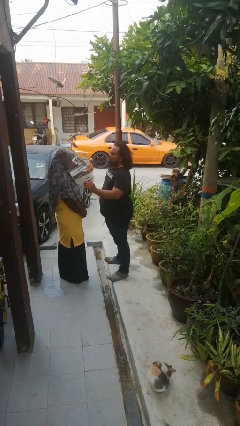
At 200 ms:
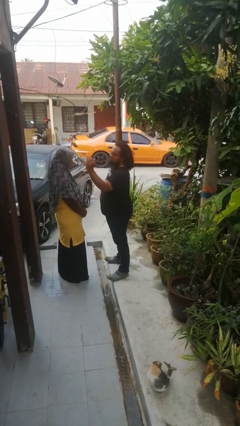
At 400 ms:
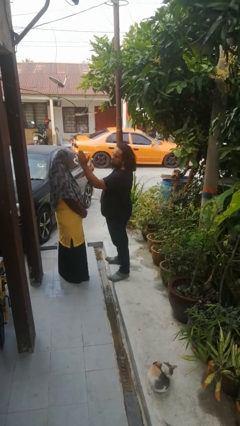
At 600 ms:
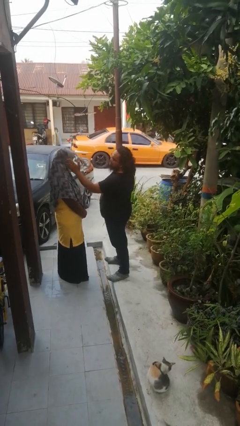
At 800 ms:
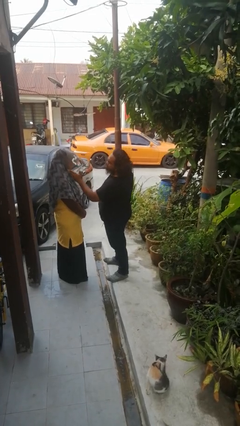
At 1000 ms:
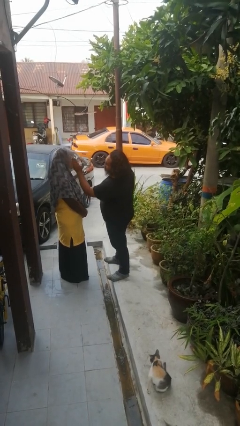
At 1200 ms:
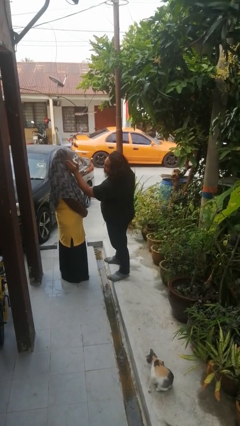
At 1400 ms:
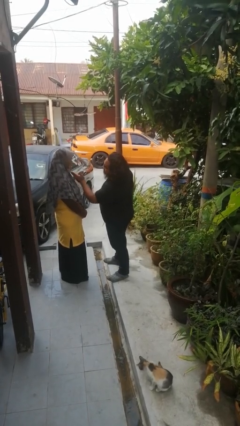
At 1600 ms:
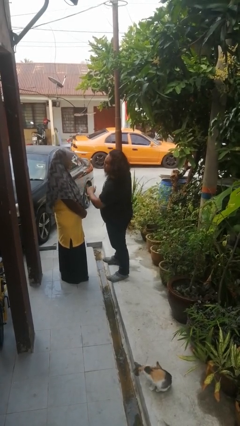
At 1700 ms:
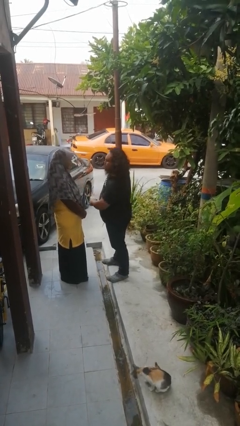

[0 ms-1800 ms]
person touches face of person

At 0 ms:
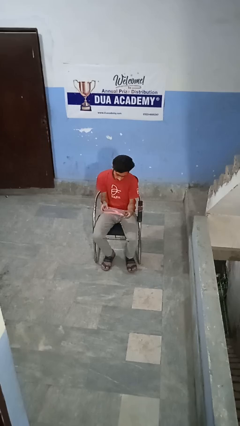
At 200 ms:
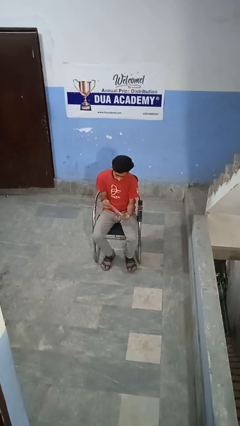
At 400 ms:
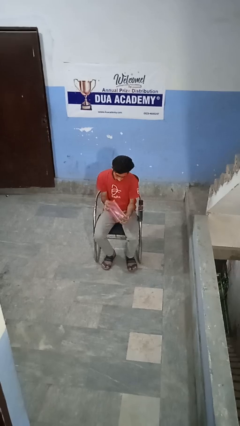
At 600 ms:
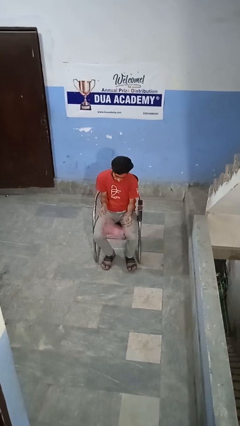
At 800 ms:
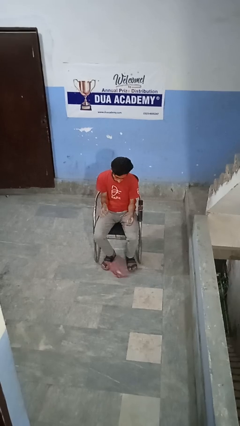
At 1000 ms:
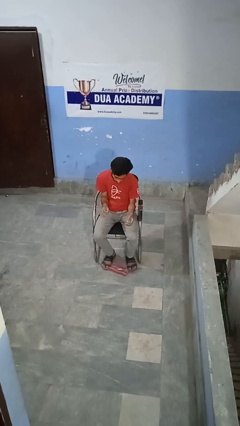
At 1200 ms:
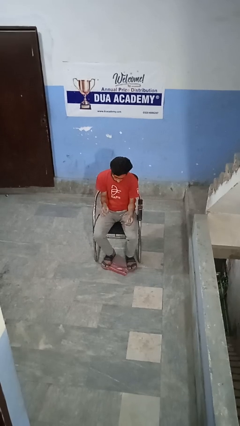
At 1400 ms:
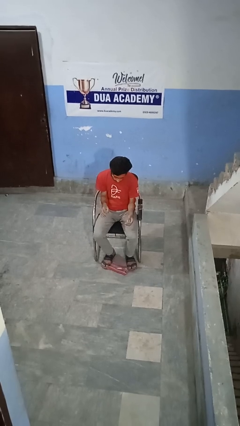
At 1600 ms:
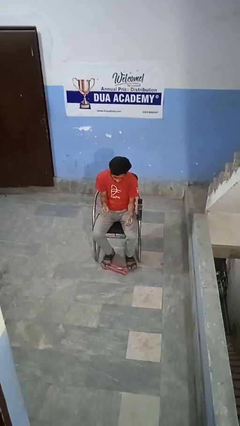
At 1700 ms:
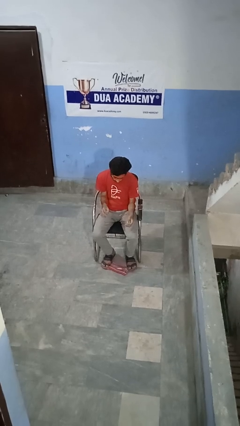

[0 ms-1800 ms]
person drops object

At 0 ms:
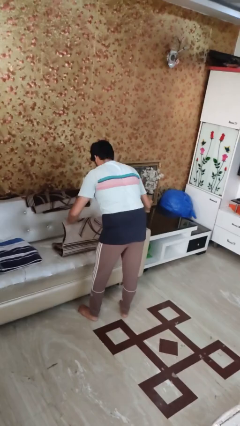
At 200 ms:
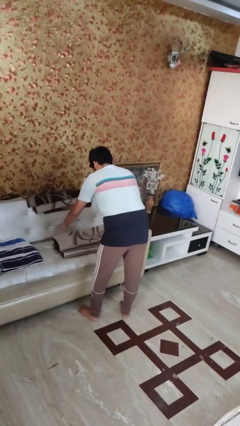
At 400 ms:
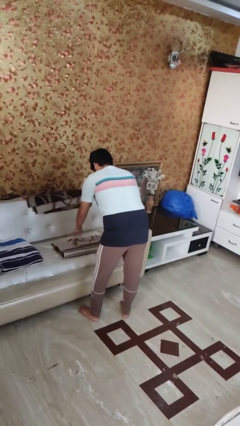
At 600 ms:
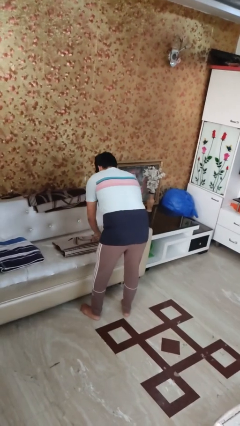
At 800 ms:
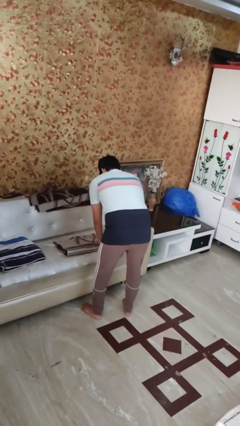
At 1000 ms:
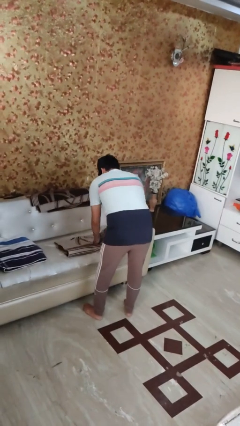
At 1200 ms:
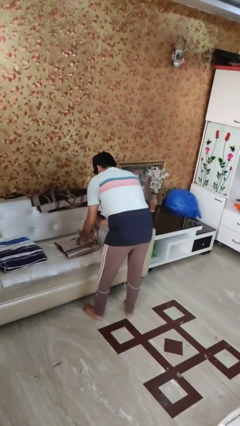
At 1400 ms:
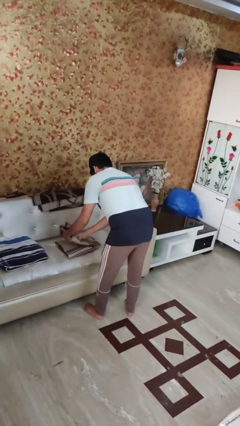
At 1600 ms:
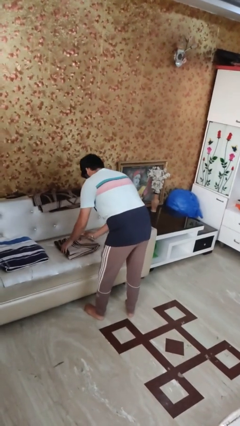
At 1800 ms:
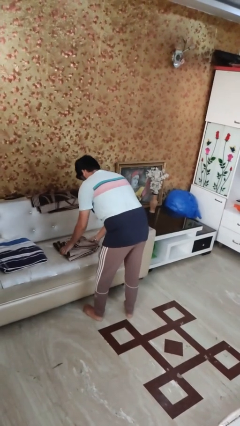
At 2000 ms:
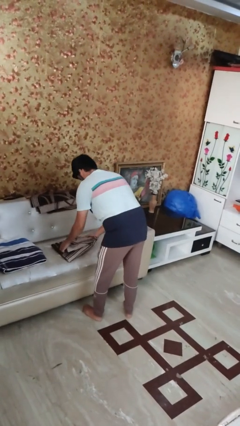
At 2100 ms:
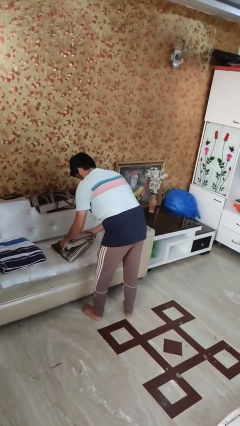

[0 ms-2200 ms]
person folds towel

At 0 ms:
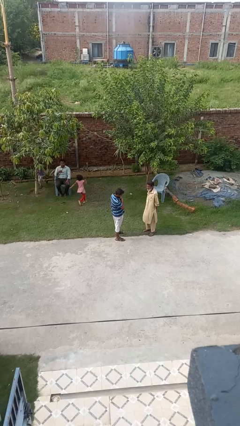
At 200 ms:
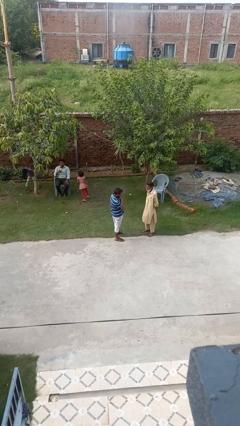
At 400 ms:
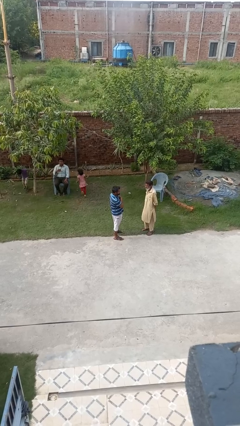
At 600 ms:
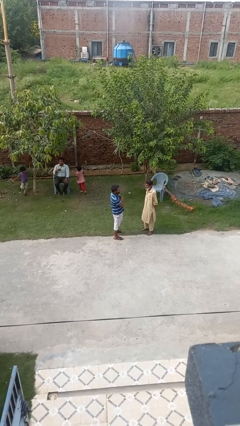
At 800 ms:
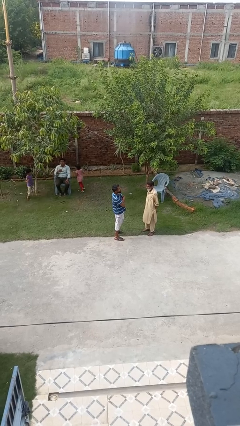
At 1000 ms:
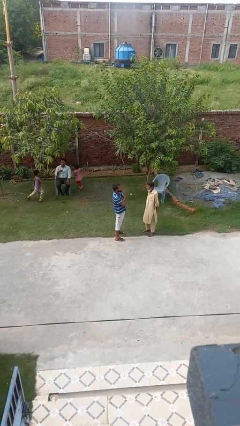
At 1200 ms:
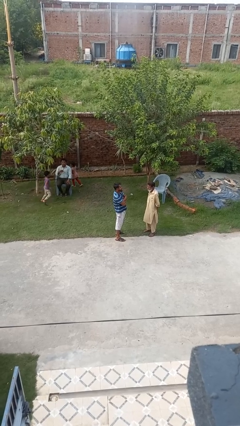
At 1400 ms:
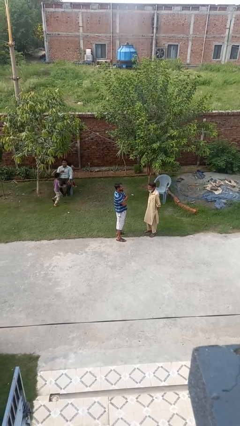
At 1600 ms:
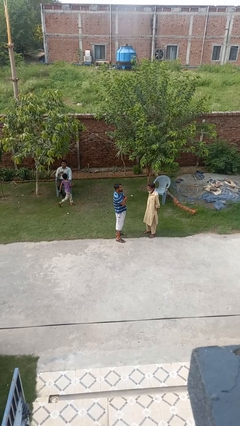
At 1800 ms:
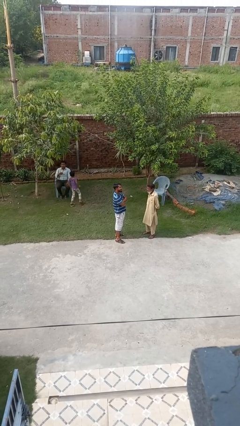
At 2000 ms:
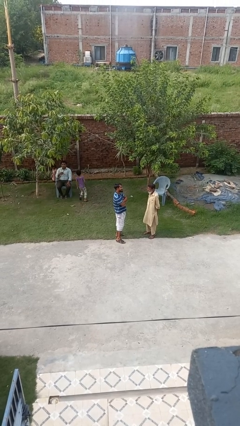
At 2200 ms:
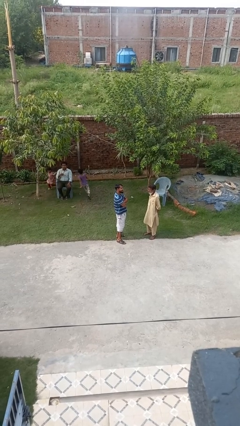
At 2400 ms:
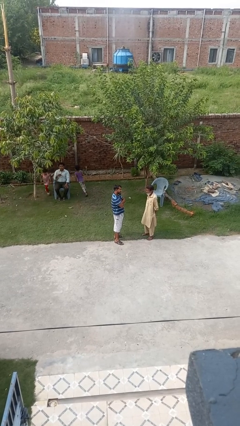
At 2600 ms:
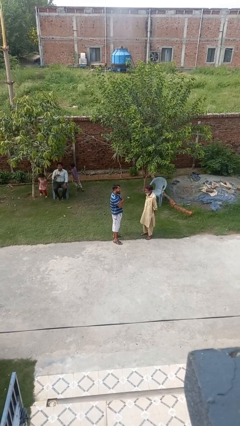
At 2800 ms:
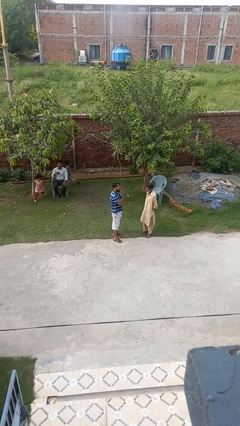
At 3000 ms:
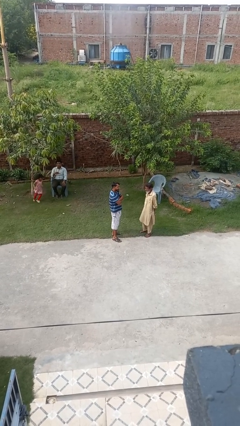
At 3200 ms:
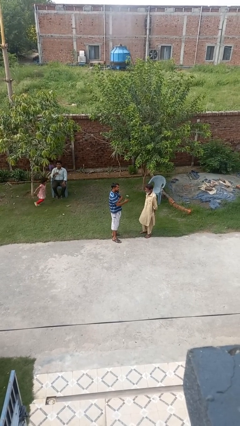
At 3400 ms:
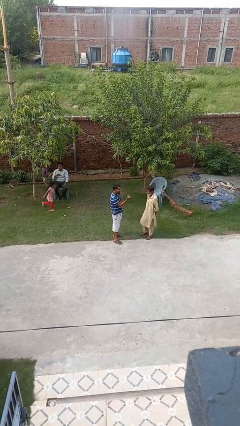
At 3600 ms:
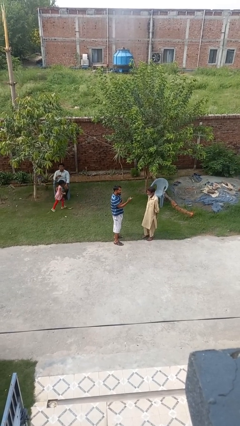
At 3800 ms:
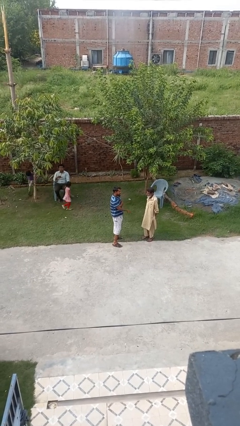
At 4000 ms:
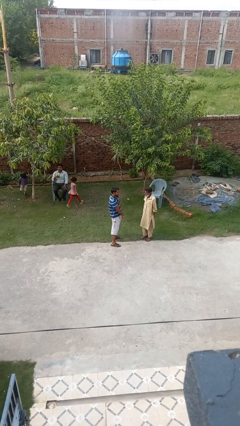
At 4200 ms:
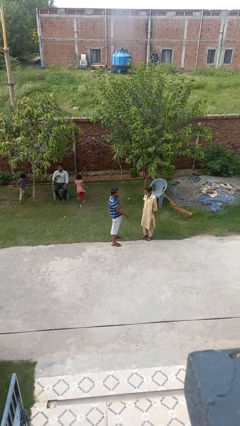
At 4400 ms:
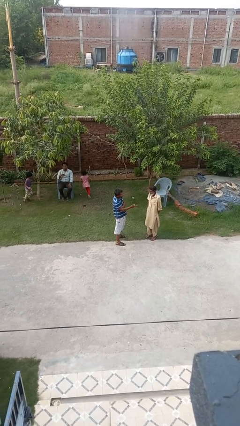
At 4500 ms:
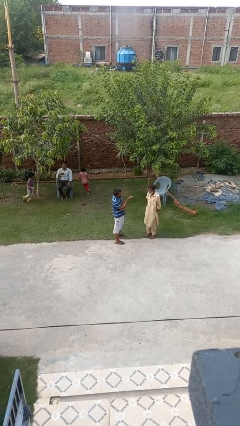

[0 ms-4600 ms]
person talks to person

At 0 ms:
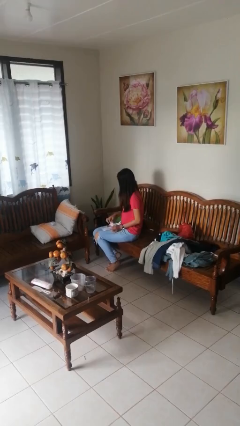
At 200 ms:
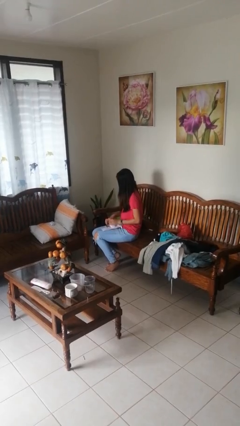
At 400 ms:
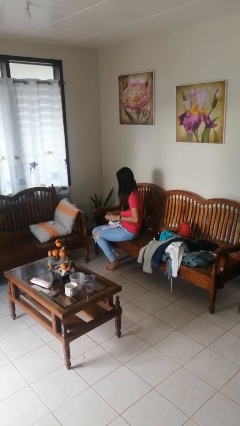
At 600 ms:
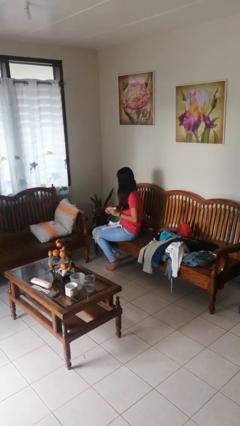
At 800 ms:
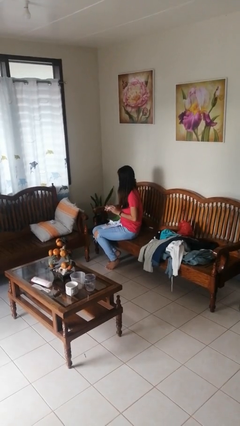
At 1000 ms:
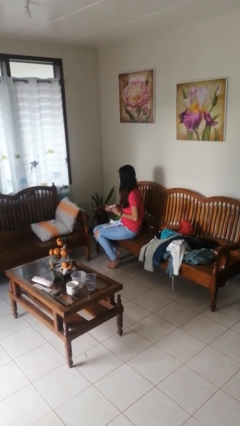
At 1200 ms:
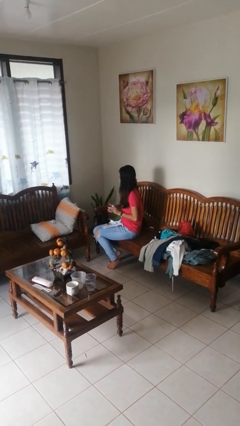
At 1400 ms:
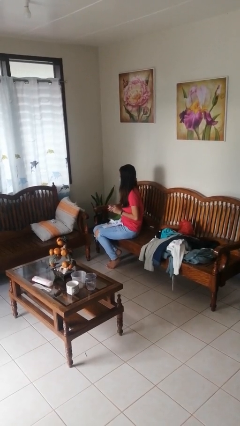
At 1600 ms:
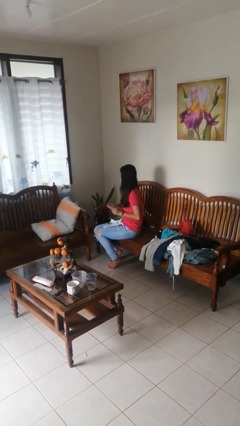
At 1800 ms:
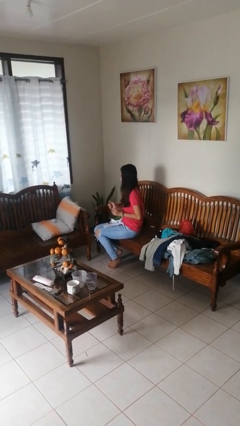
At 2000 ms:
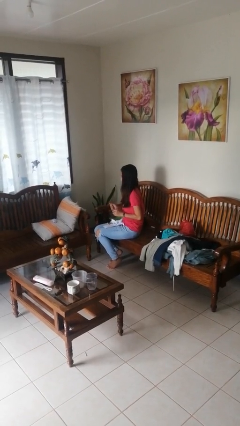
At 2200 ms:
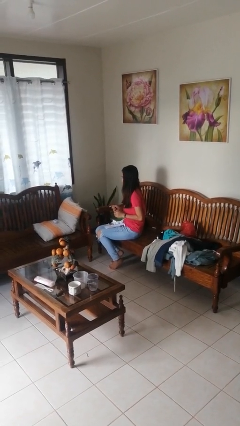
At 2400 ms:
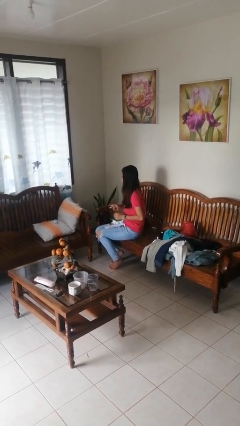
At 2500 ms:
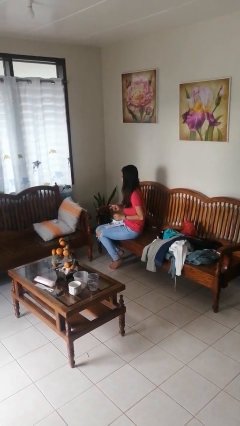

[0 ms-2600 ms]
person crumples paper

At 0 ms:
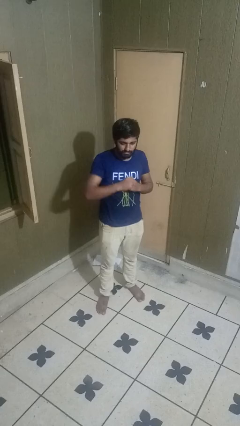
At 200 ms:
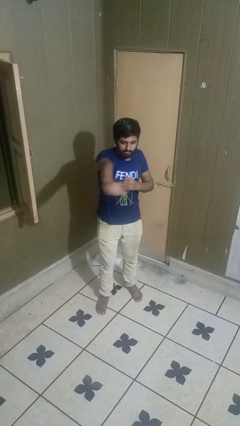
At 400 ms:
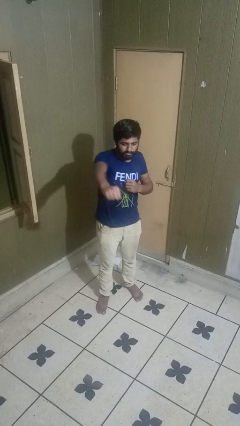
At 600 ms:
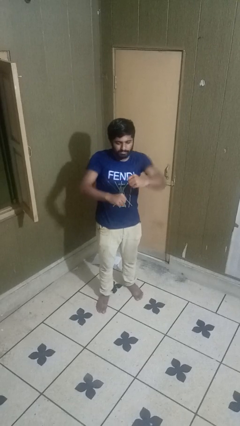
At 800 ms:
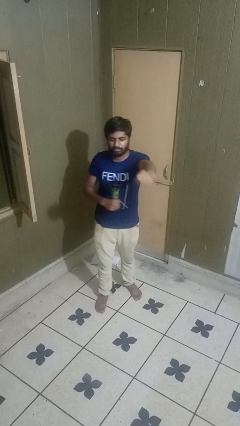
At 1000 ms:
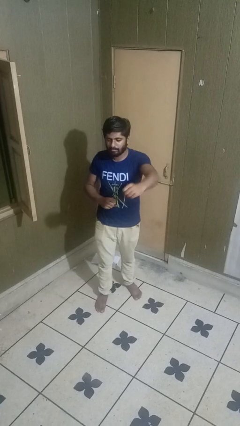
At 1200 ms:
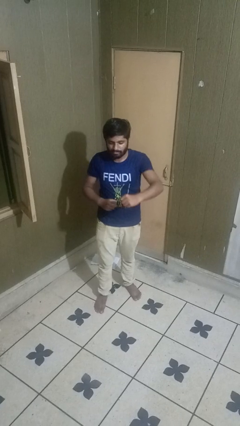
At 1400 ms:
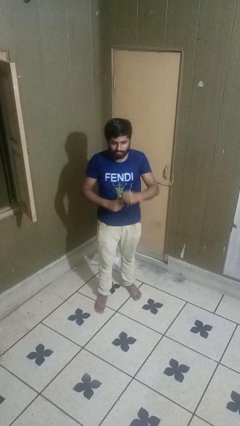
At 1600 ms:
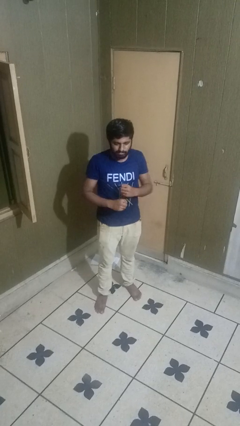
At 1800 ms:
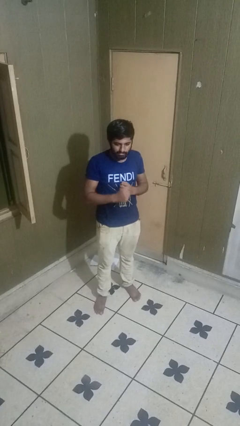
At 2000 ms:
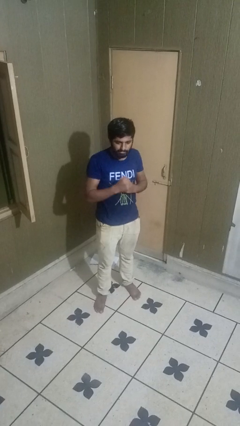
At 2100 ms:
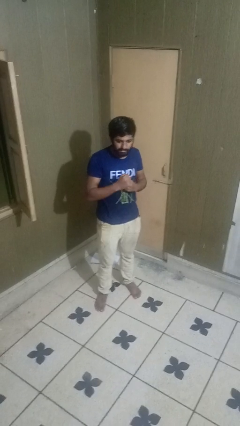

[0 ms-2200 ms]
person punches

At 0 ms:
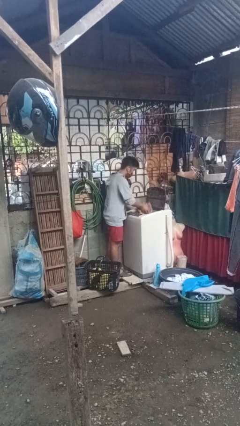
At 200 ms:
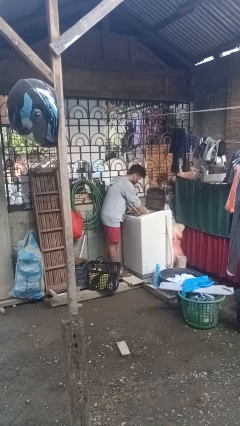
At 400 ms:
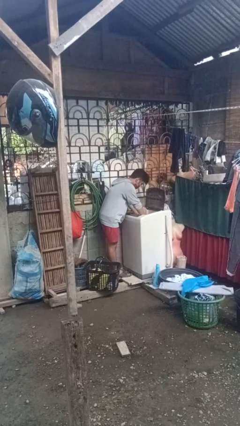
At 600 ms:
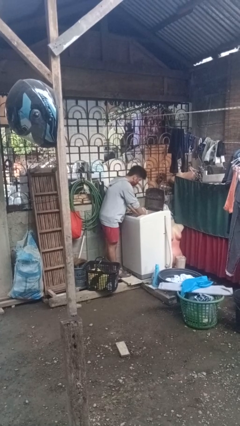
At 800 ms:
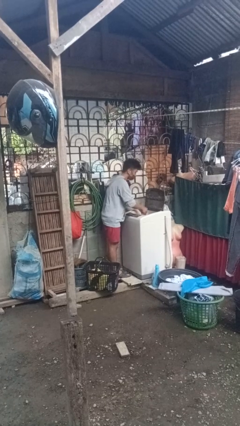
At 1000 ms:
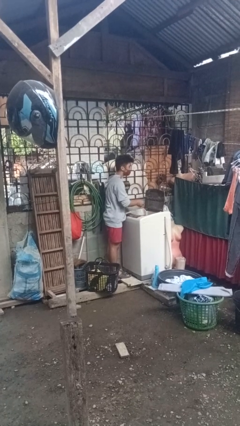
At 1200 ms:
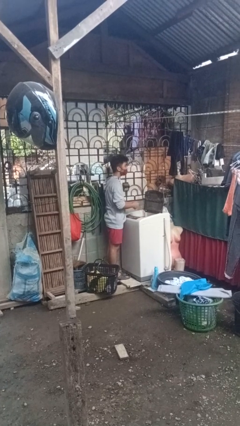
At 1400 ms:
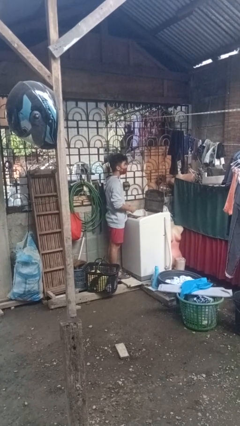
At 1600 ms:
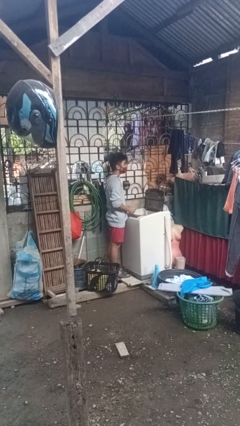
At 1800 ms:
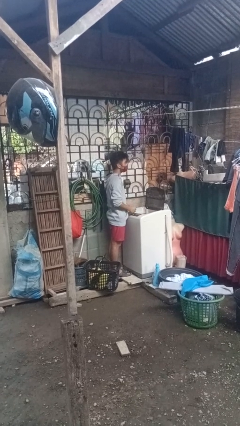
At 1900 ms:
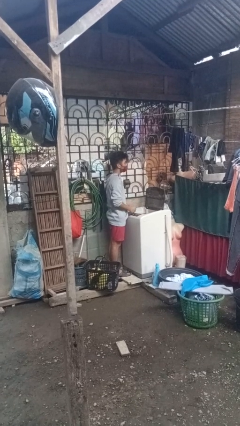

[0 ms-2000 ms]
person loads dryer
